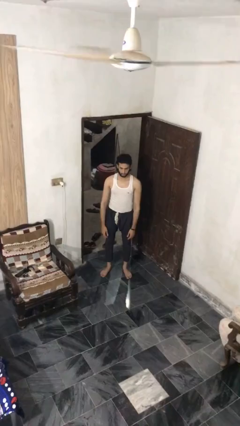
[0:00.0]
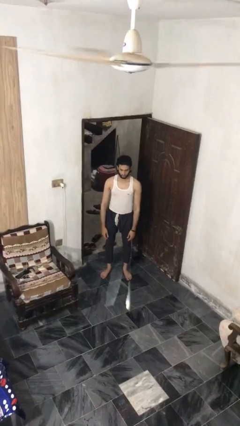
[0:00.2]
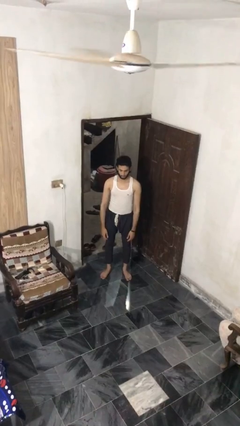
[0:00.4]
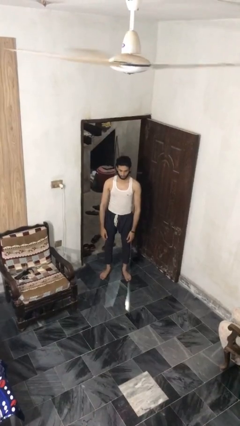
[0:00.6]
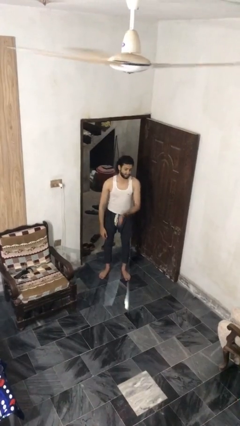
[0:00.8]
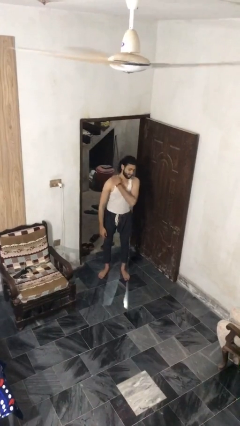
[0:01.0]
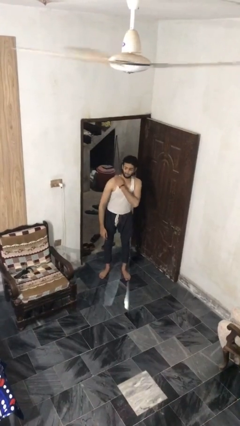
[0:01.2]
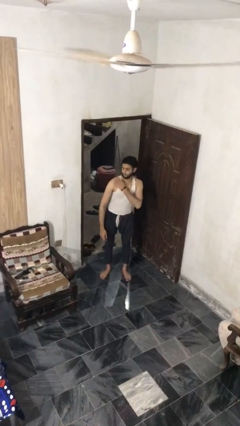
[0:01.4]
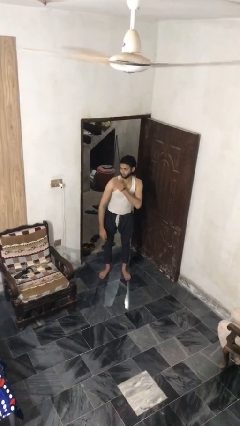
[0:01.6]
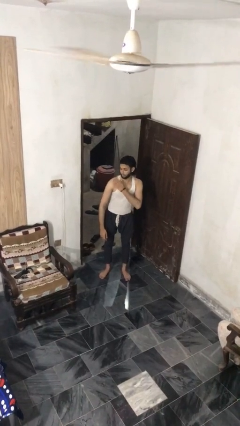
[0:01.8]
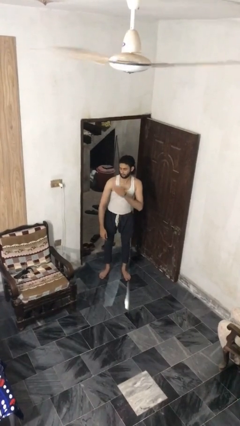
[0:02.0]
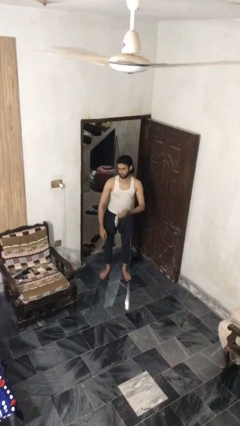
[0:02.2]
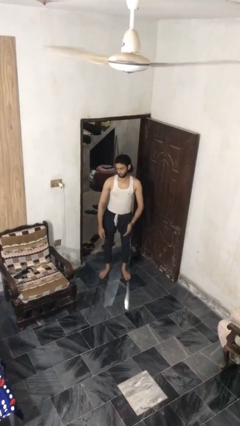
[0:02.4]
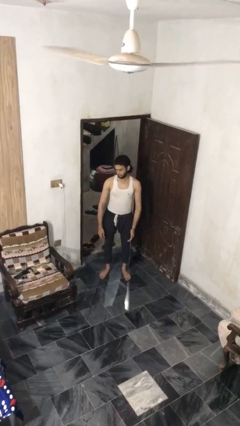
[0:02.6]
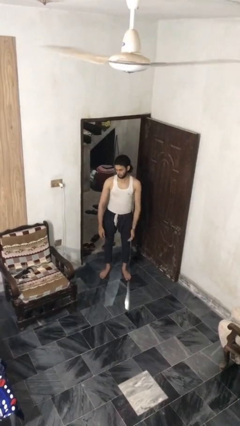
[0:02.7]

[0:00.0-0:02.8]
person swats bug

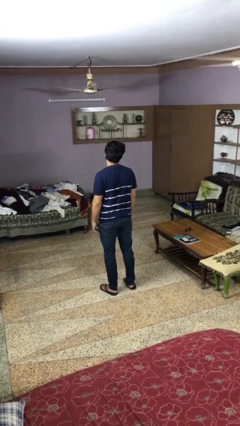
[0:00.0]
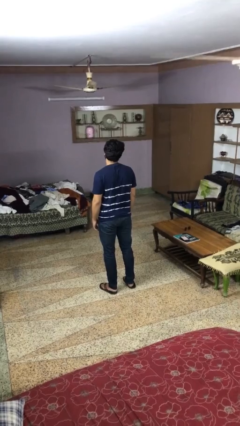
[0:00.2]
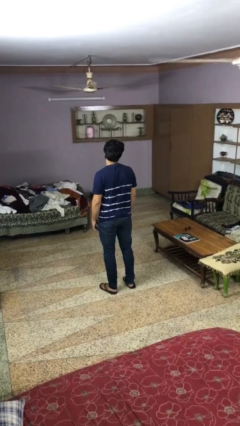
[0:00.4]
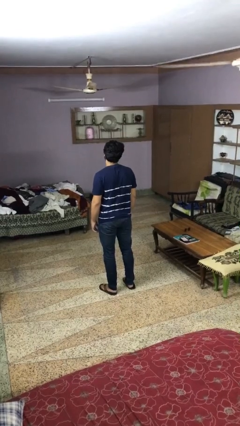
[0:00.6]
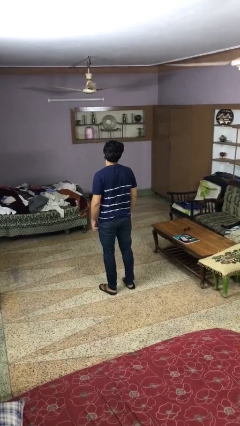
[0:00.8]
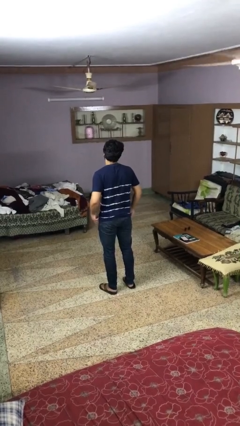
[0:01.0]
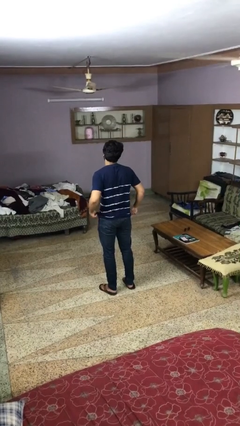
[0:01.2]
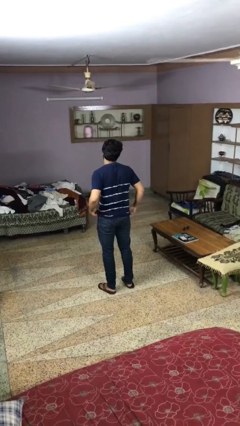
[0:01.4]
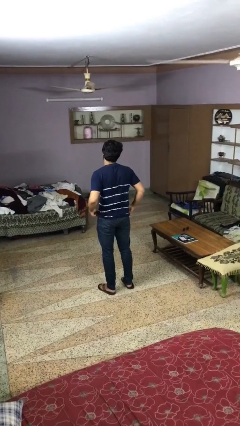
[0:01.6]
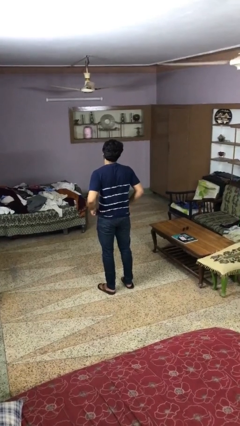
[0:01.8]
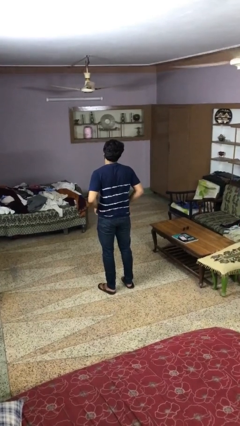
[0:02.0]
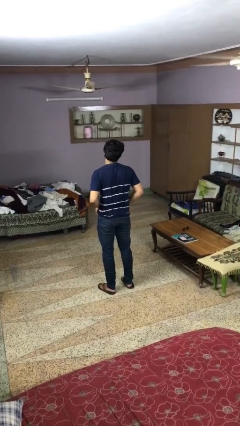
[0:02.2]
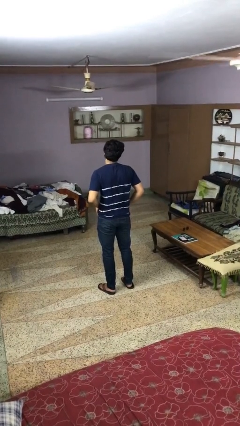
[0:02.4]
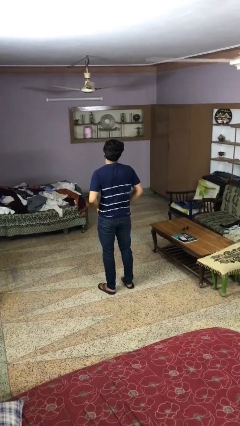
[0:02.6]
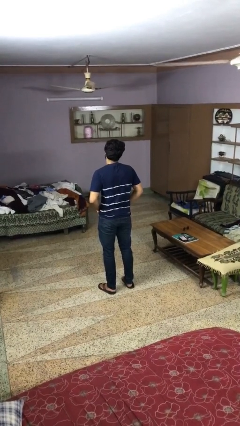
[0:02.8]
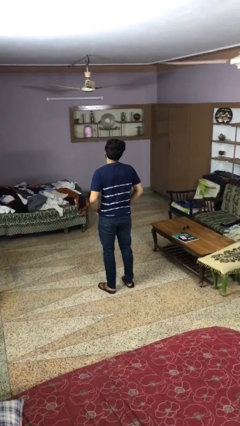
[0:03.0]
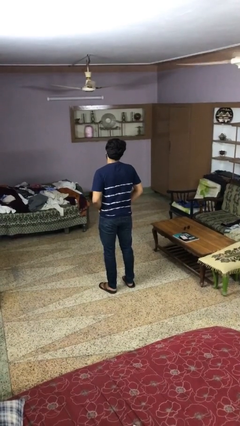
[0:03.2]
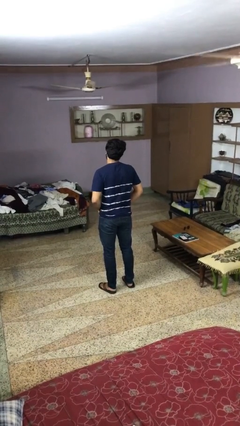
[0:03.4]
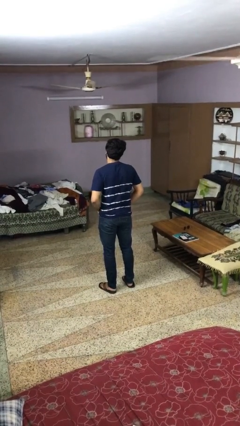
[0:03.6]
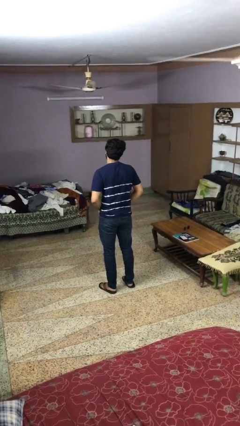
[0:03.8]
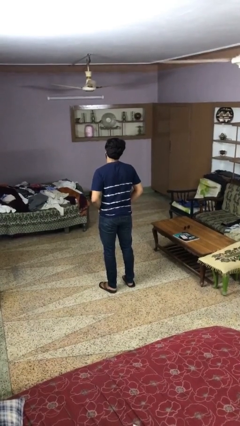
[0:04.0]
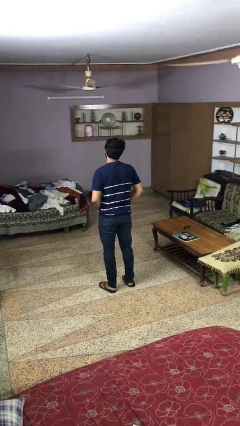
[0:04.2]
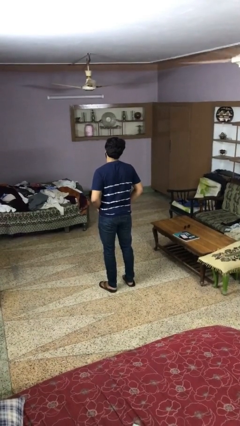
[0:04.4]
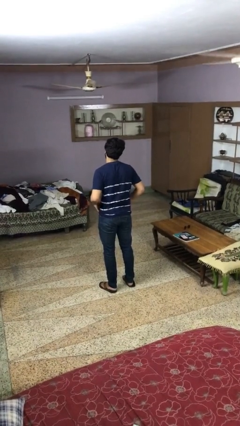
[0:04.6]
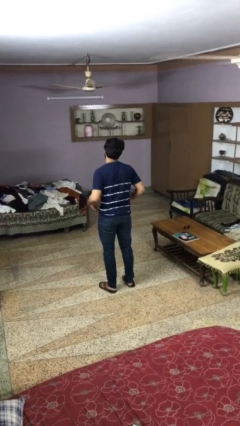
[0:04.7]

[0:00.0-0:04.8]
person puts hands in back pockets

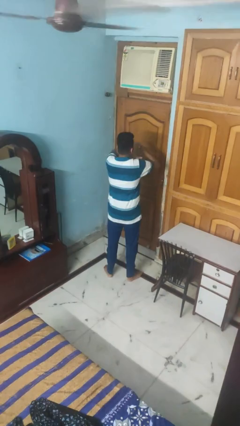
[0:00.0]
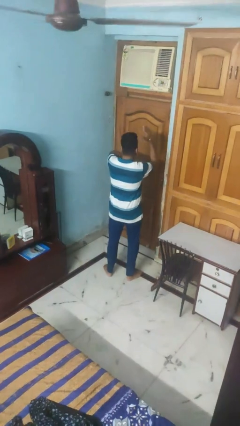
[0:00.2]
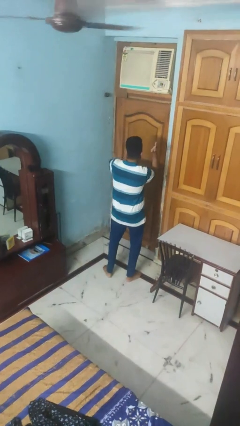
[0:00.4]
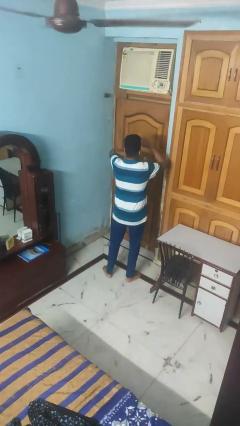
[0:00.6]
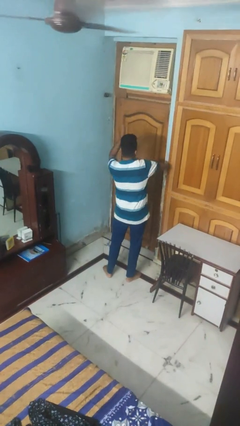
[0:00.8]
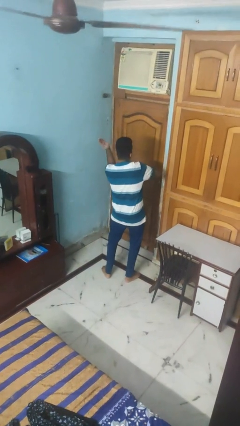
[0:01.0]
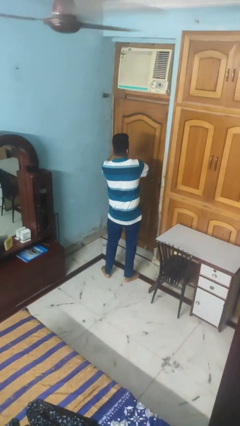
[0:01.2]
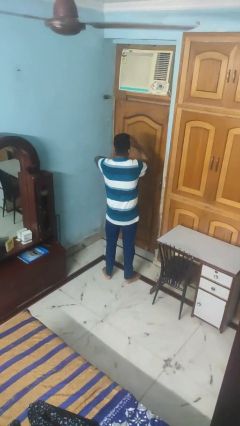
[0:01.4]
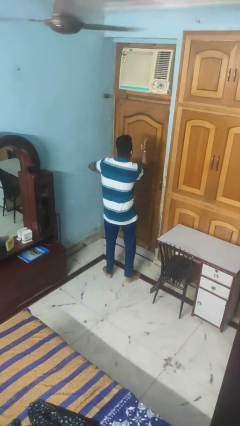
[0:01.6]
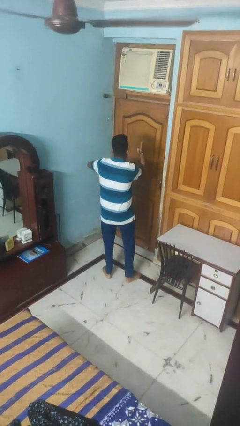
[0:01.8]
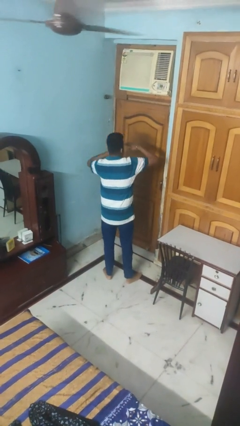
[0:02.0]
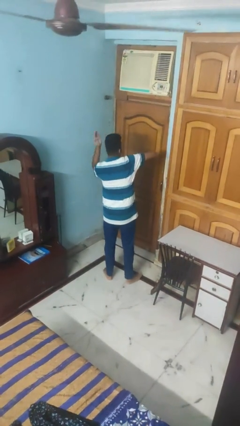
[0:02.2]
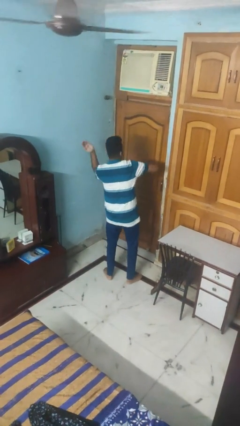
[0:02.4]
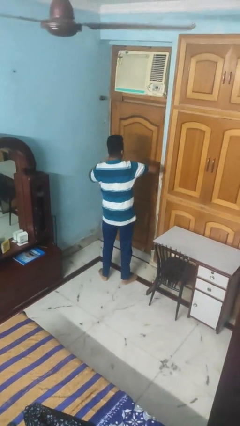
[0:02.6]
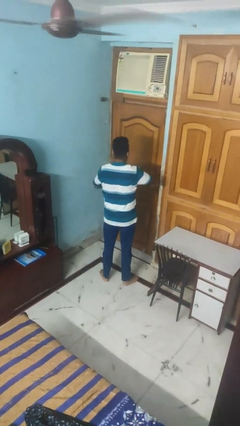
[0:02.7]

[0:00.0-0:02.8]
person dances in place

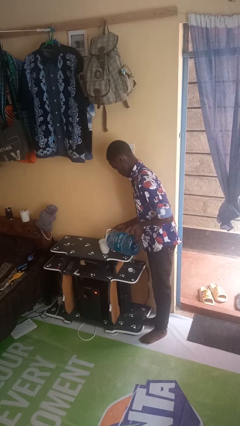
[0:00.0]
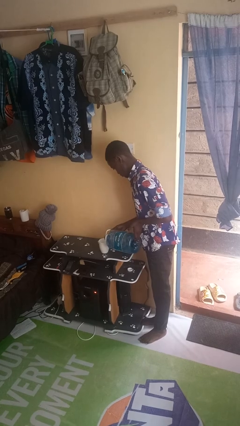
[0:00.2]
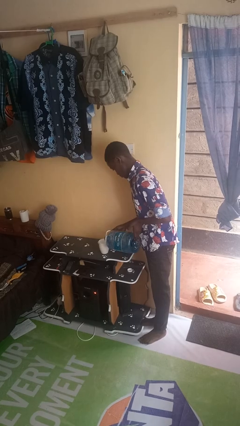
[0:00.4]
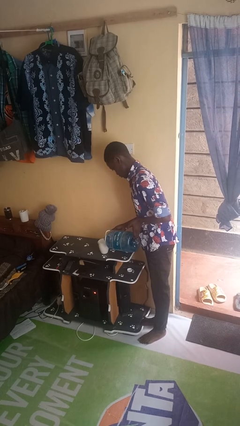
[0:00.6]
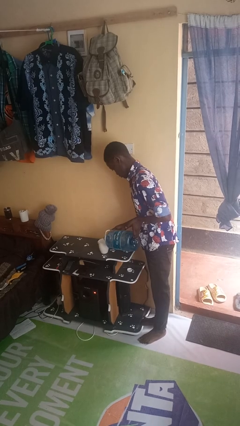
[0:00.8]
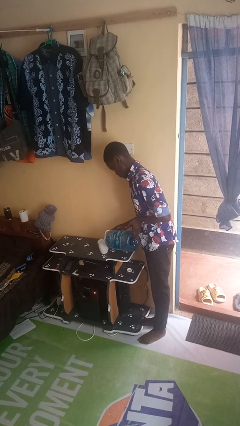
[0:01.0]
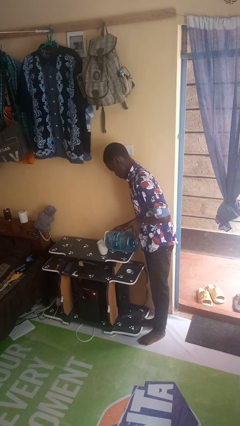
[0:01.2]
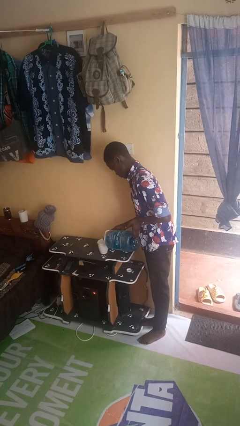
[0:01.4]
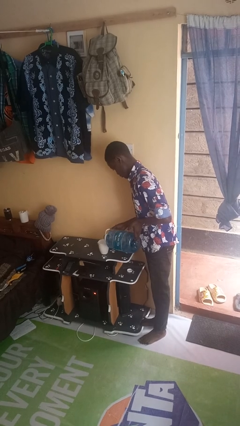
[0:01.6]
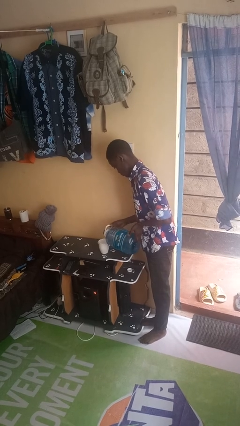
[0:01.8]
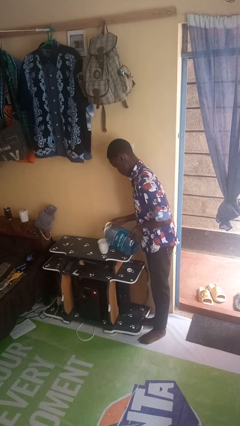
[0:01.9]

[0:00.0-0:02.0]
person pours liquid into cup

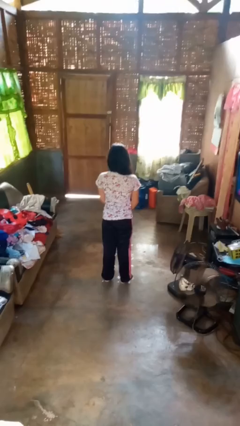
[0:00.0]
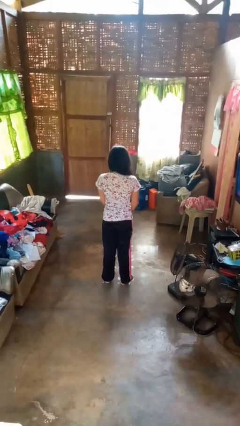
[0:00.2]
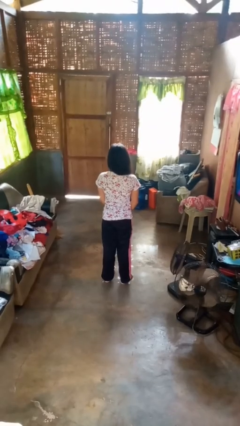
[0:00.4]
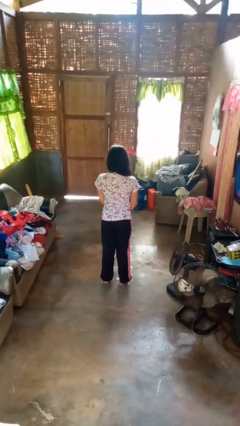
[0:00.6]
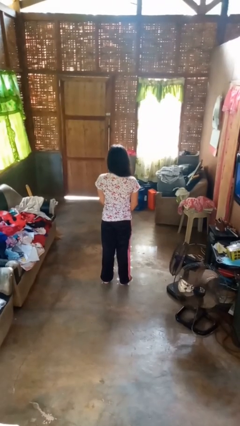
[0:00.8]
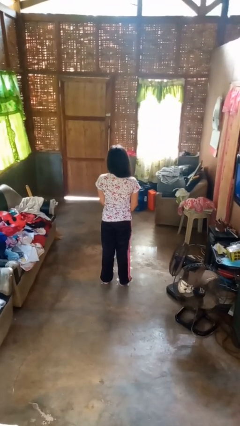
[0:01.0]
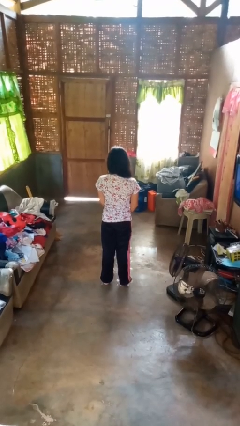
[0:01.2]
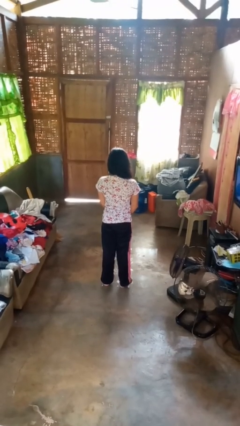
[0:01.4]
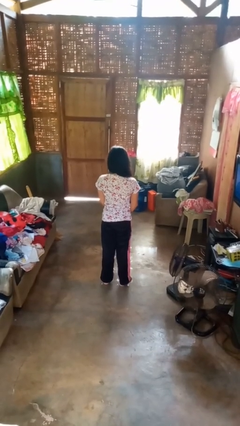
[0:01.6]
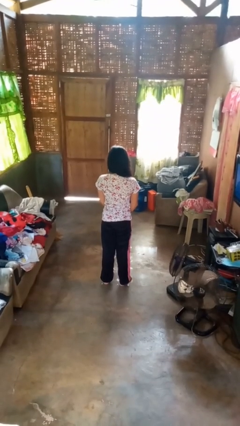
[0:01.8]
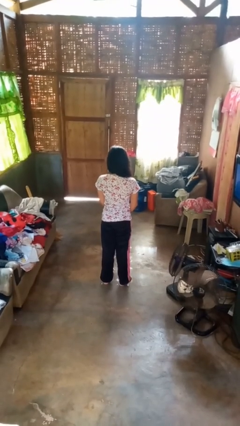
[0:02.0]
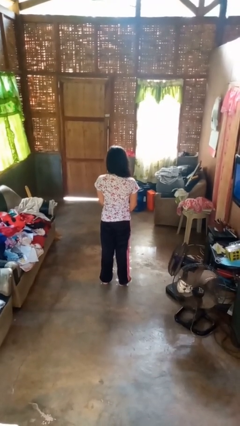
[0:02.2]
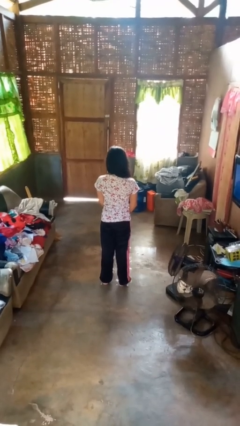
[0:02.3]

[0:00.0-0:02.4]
person nods head

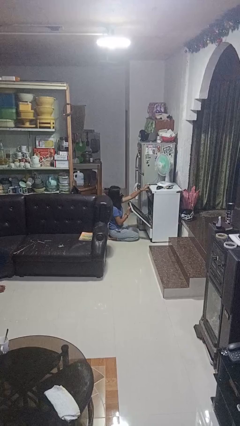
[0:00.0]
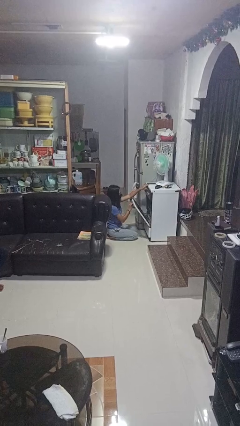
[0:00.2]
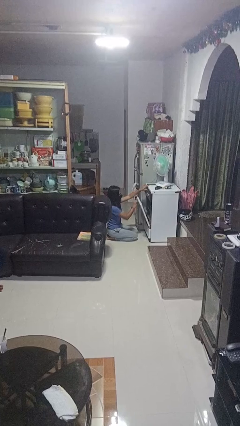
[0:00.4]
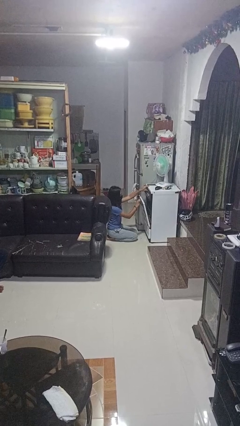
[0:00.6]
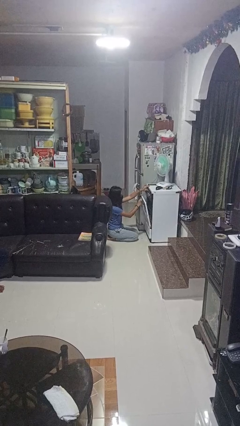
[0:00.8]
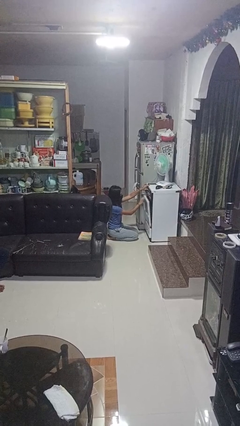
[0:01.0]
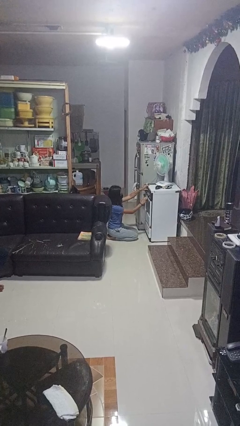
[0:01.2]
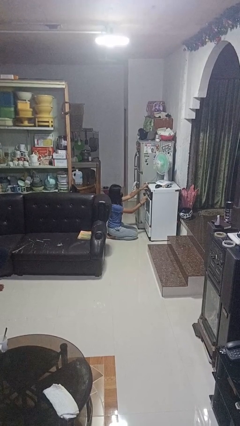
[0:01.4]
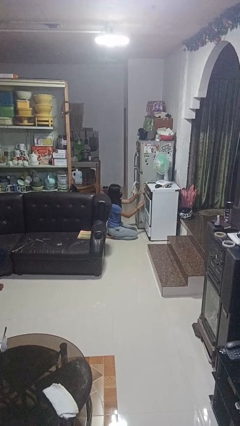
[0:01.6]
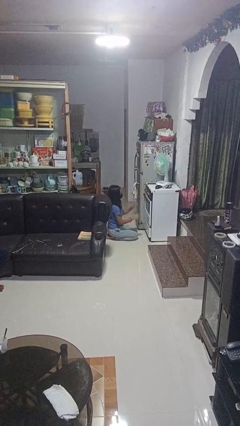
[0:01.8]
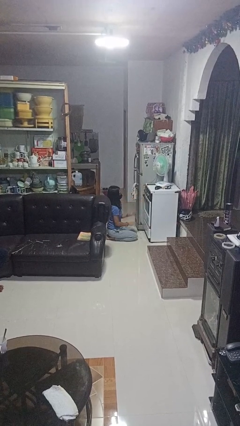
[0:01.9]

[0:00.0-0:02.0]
person closes oven door
